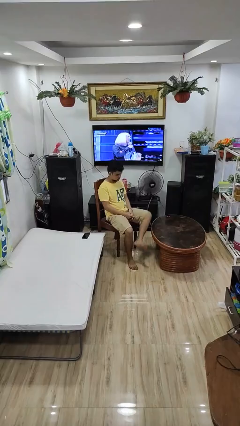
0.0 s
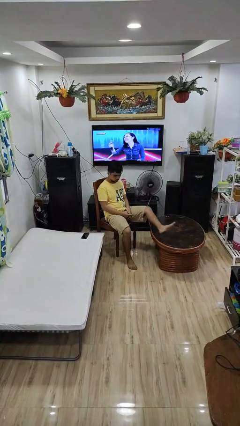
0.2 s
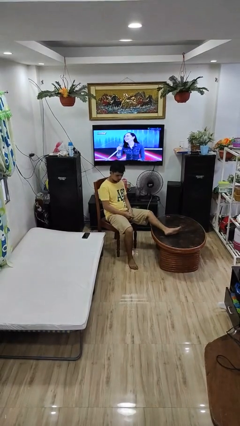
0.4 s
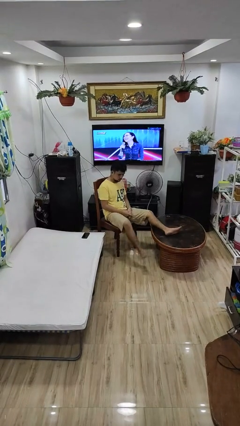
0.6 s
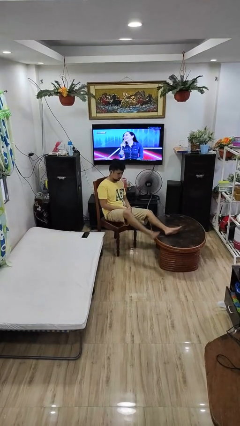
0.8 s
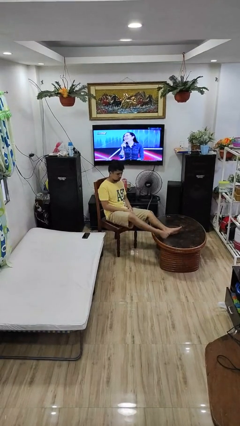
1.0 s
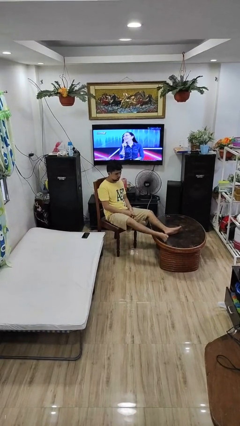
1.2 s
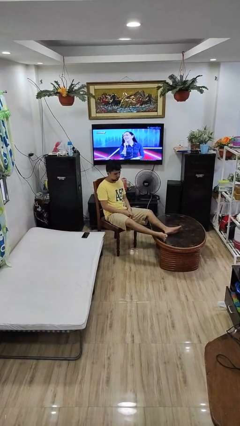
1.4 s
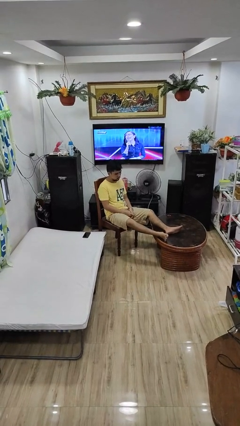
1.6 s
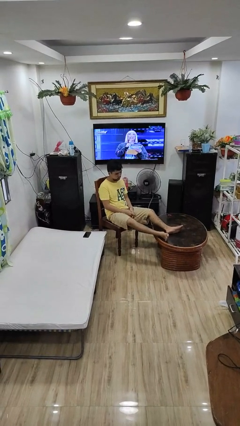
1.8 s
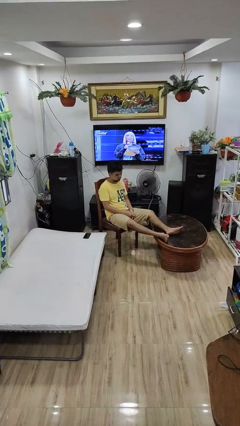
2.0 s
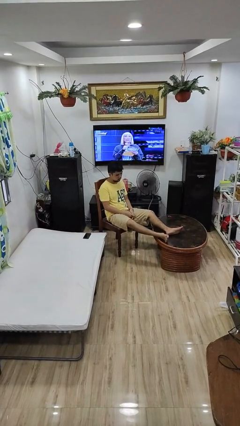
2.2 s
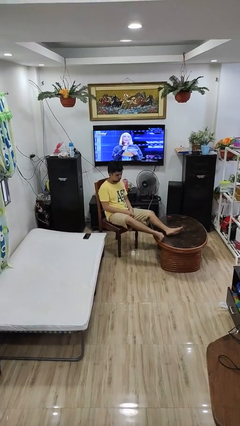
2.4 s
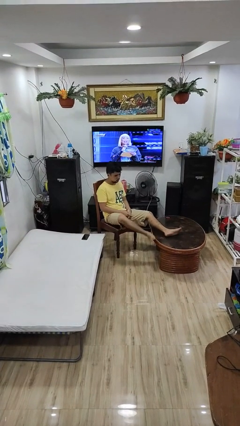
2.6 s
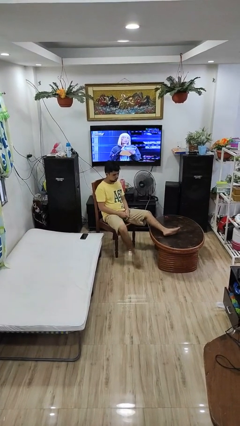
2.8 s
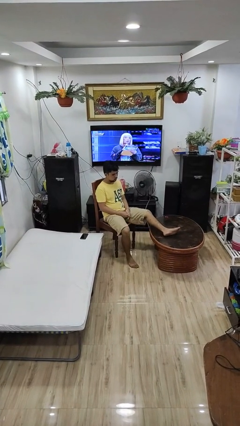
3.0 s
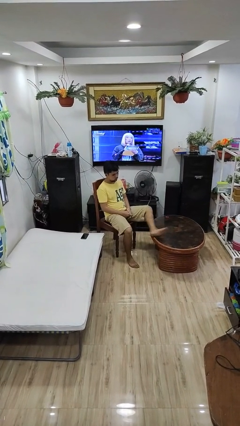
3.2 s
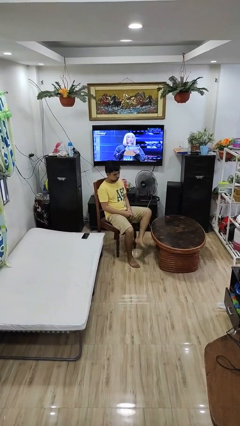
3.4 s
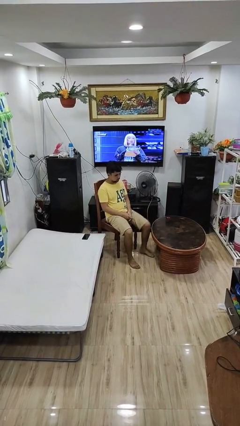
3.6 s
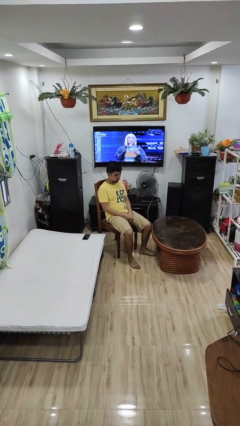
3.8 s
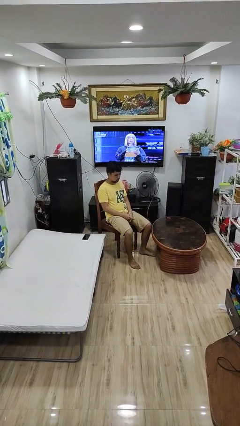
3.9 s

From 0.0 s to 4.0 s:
person puts feet up

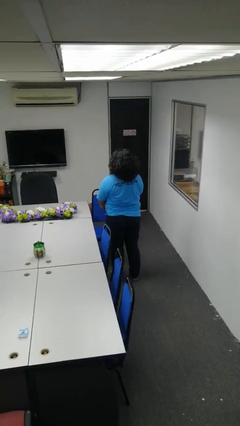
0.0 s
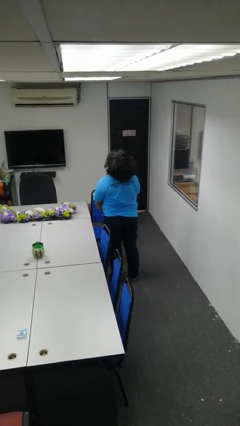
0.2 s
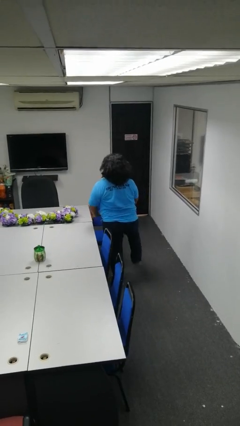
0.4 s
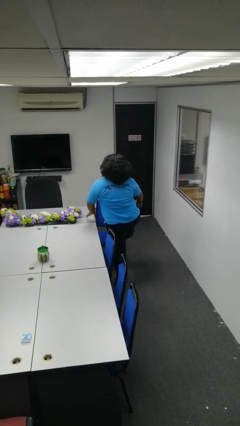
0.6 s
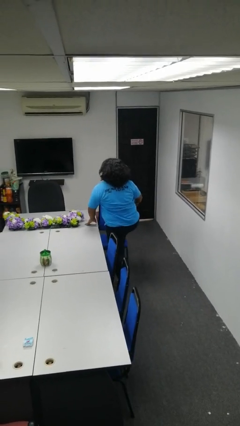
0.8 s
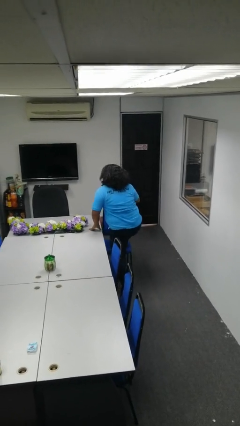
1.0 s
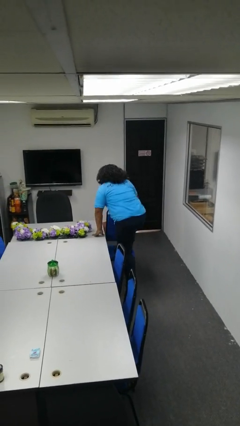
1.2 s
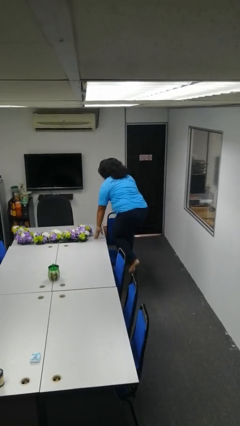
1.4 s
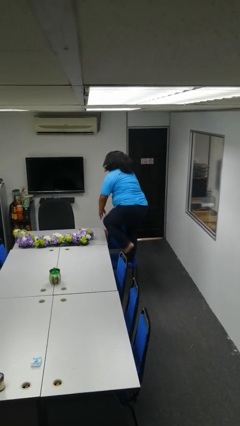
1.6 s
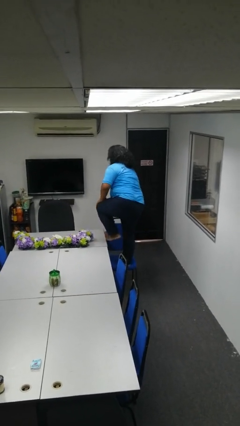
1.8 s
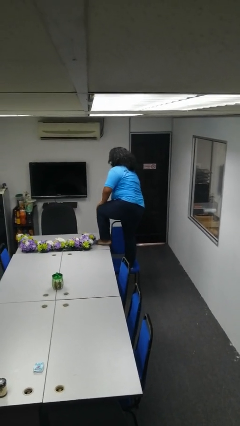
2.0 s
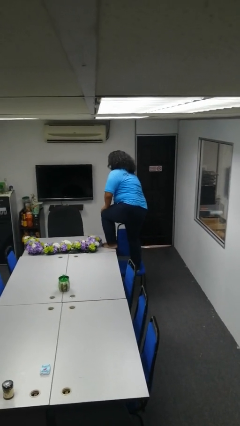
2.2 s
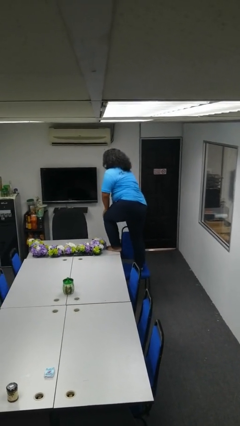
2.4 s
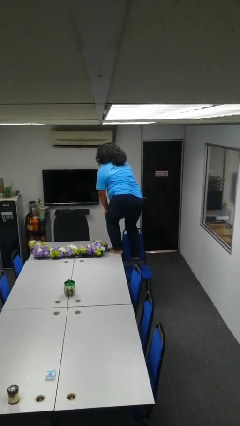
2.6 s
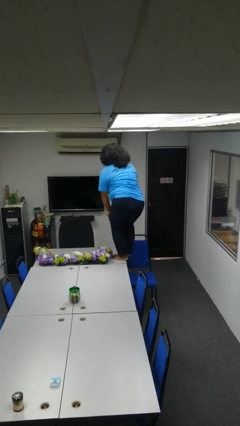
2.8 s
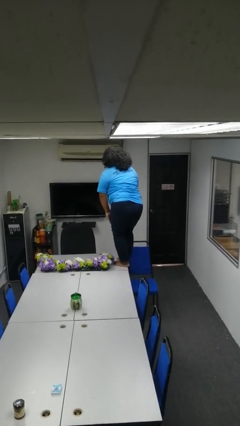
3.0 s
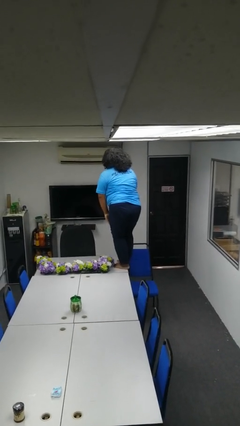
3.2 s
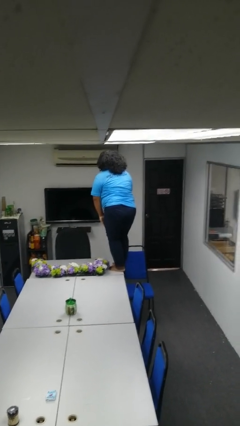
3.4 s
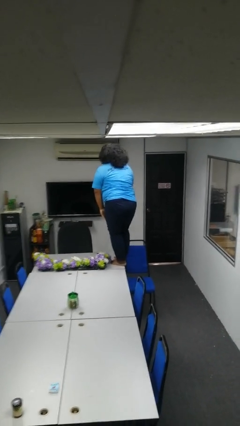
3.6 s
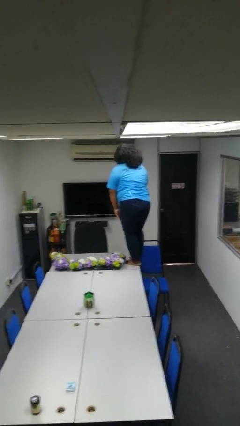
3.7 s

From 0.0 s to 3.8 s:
person climbs on table

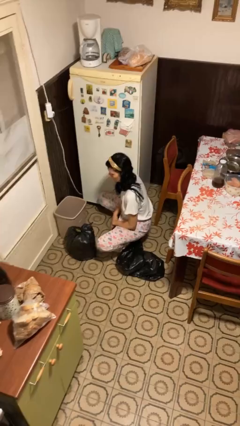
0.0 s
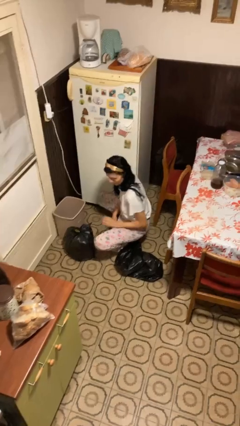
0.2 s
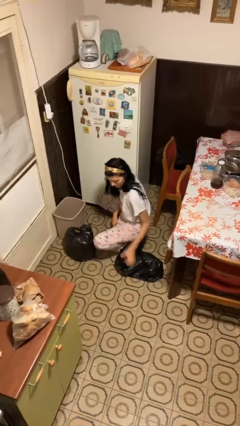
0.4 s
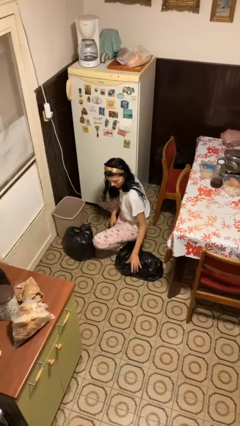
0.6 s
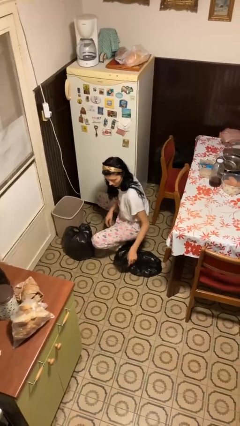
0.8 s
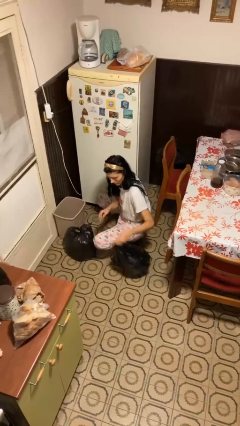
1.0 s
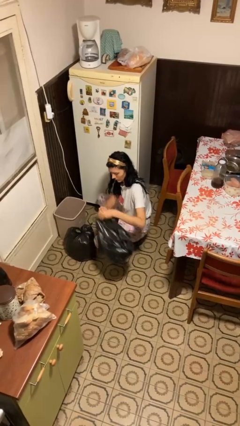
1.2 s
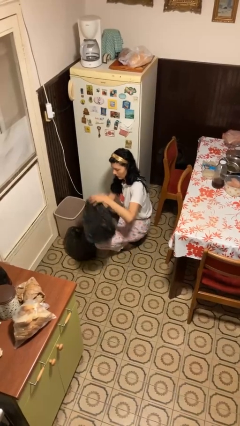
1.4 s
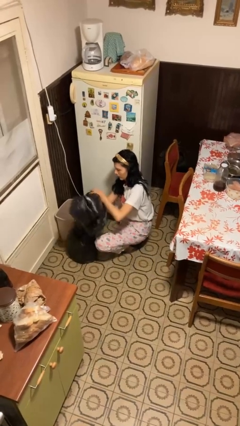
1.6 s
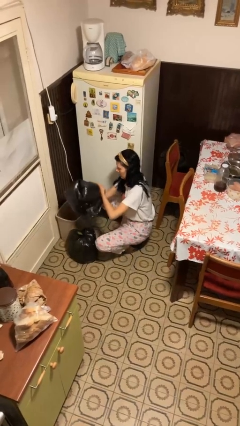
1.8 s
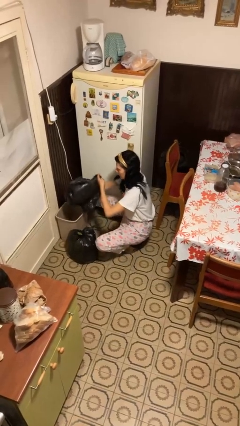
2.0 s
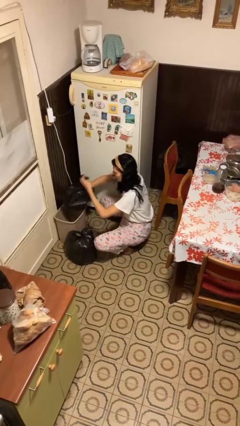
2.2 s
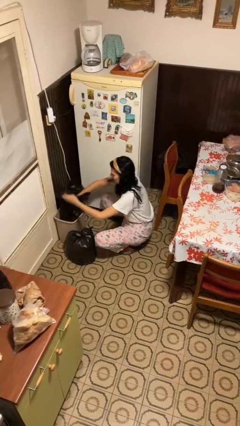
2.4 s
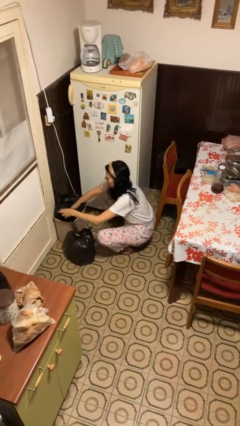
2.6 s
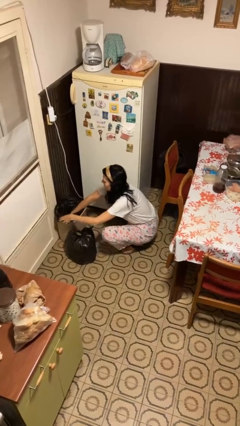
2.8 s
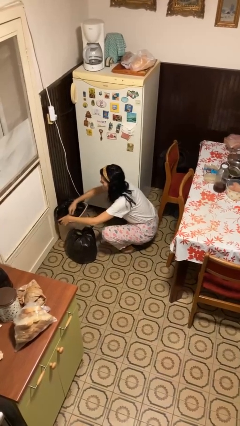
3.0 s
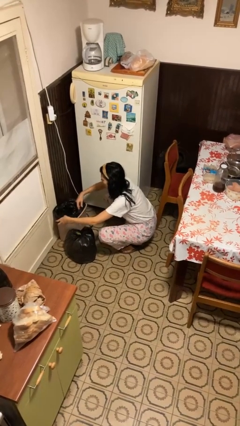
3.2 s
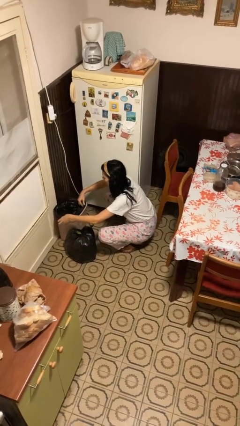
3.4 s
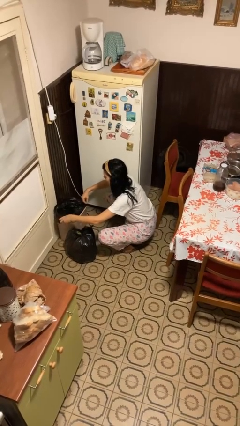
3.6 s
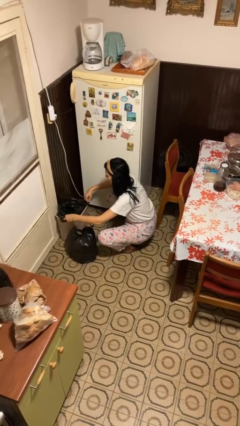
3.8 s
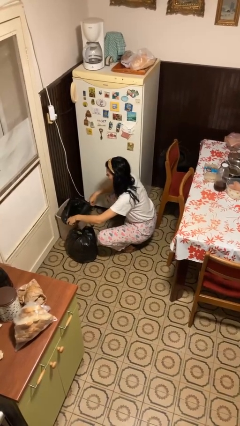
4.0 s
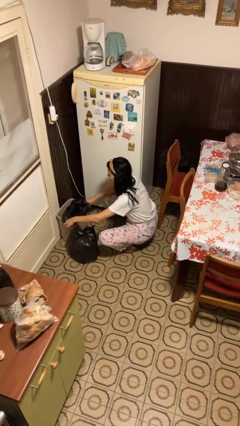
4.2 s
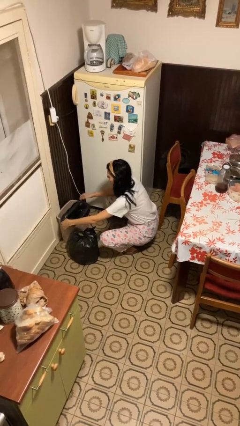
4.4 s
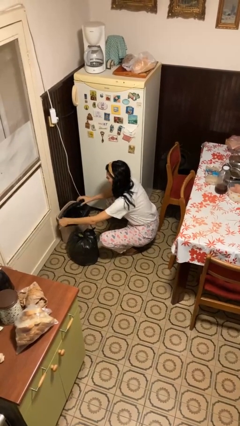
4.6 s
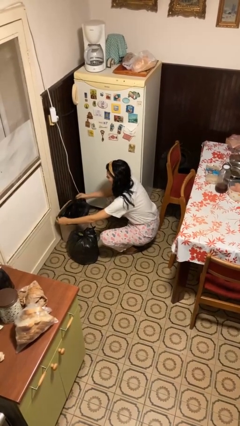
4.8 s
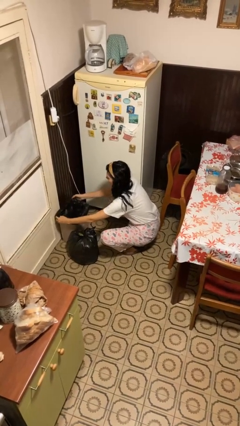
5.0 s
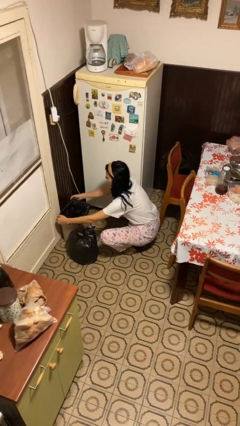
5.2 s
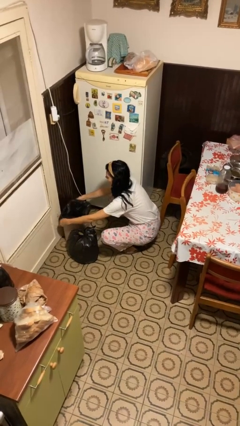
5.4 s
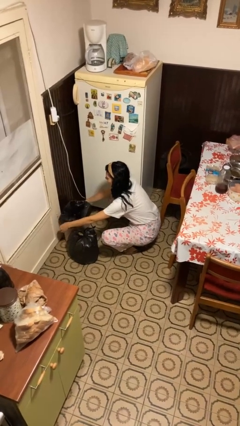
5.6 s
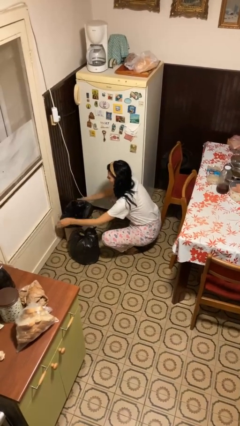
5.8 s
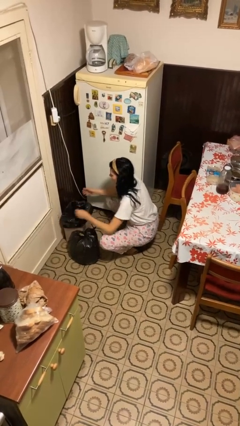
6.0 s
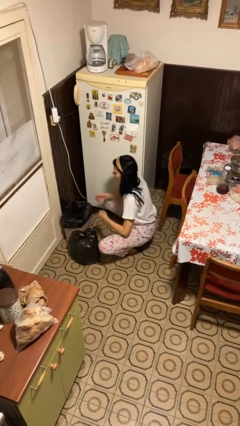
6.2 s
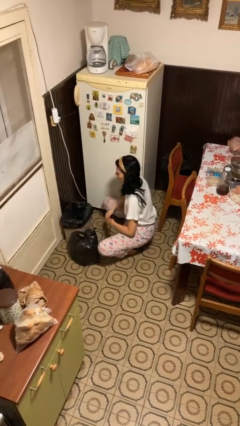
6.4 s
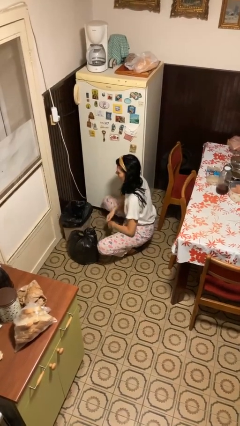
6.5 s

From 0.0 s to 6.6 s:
person inserts trashbag into trashcan

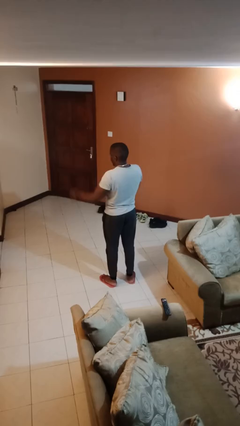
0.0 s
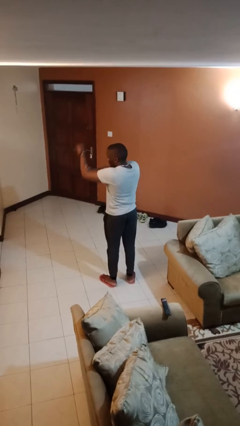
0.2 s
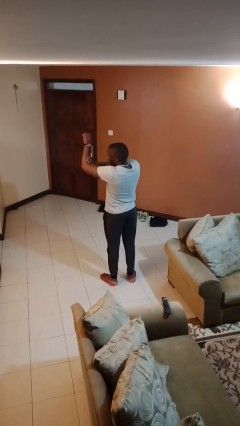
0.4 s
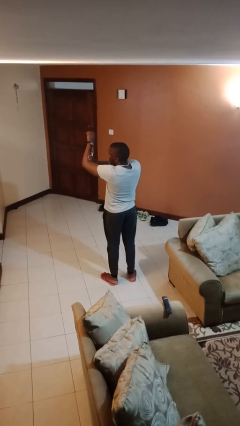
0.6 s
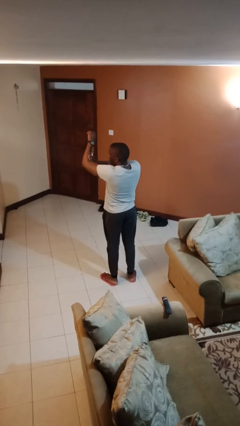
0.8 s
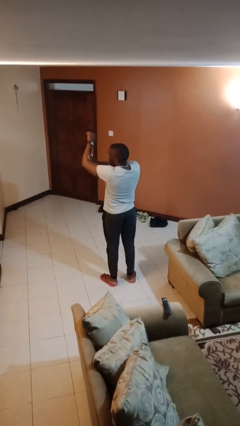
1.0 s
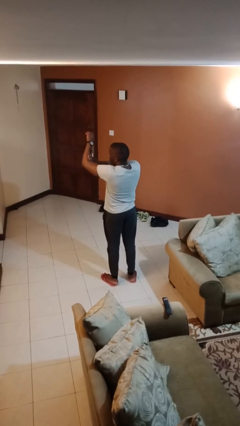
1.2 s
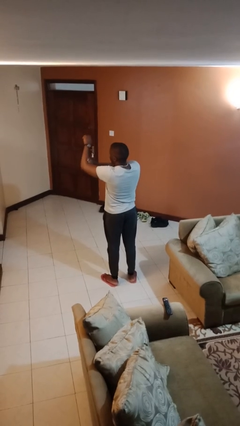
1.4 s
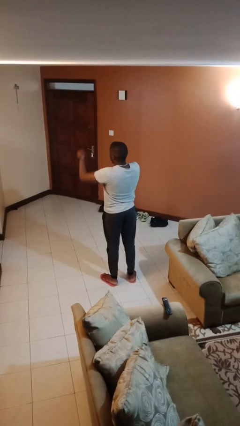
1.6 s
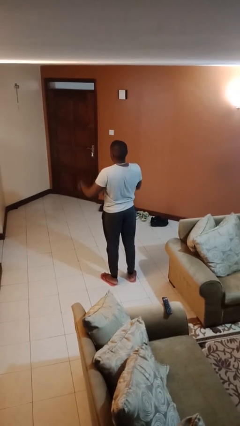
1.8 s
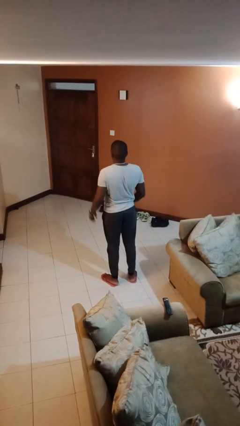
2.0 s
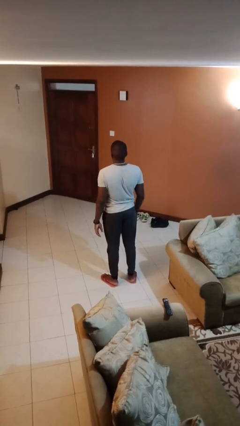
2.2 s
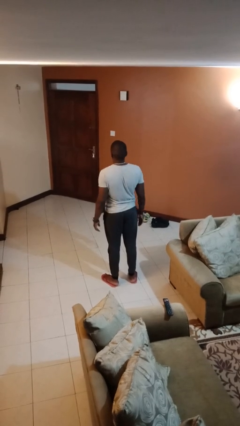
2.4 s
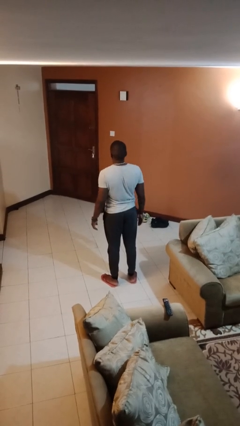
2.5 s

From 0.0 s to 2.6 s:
person swats bug

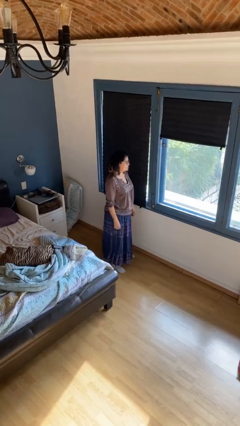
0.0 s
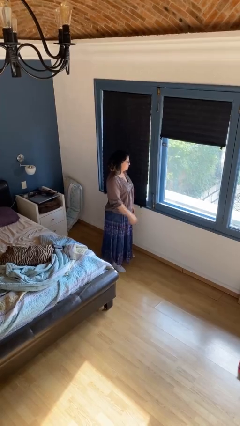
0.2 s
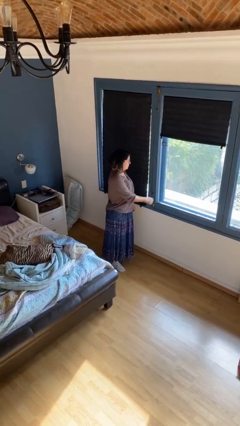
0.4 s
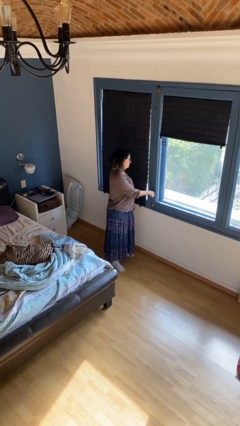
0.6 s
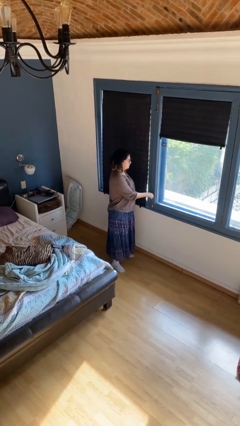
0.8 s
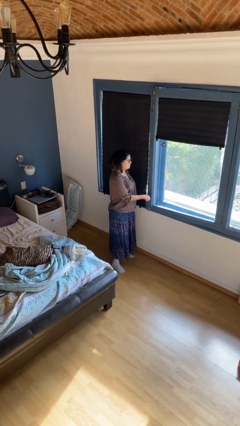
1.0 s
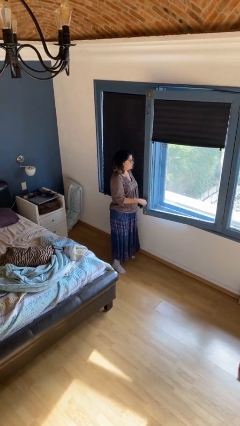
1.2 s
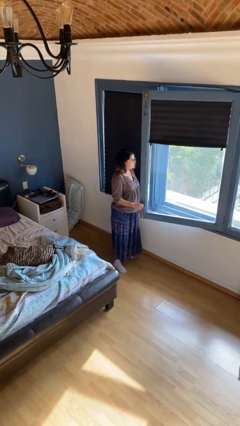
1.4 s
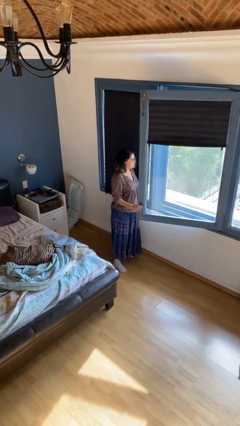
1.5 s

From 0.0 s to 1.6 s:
person opens home window
